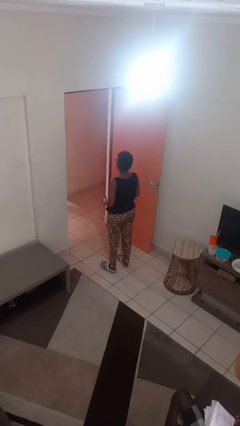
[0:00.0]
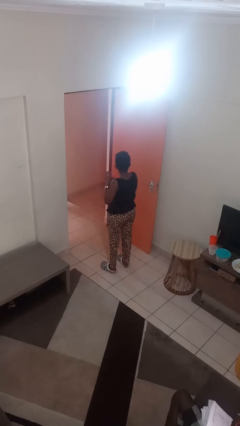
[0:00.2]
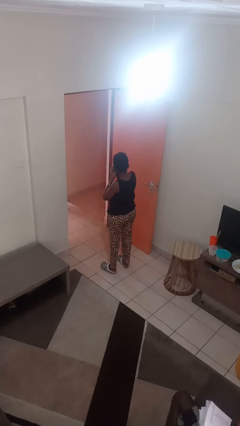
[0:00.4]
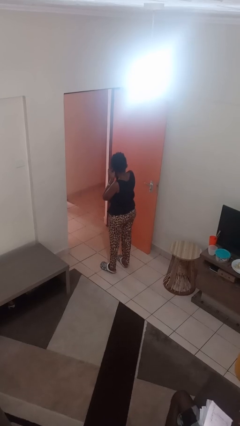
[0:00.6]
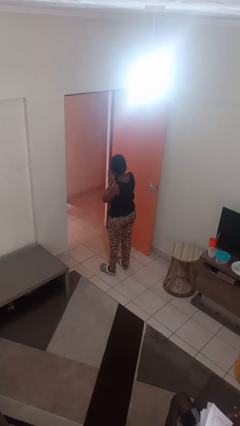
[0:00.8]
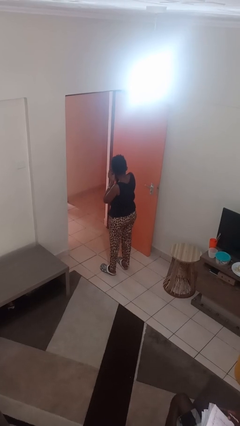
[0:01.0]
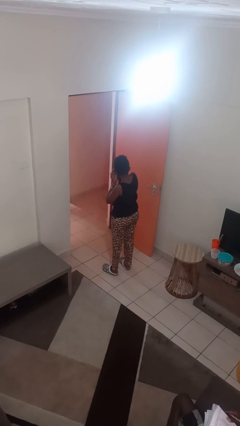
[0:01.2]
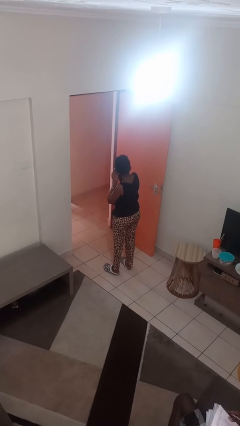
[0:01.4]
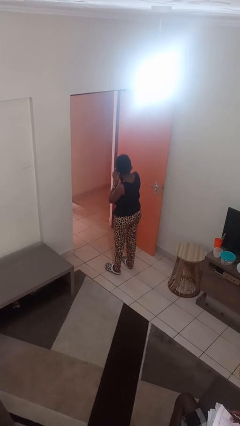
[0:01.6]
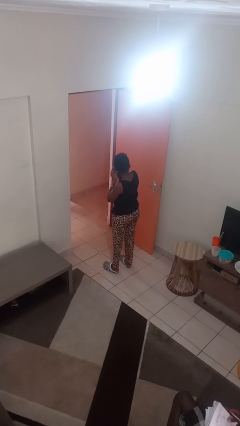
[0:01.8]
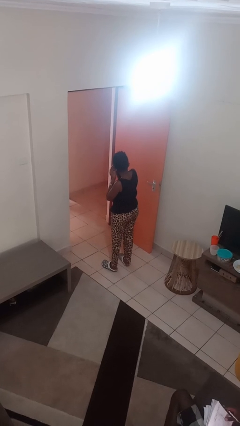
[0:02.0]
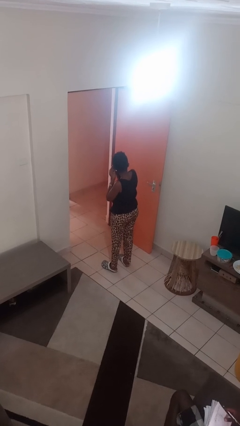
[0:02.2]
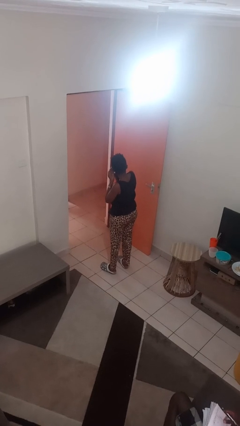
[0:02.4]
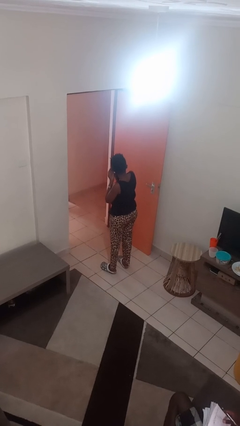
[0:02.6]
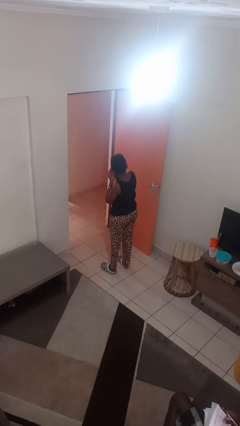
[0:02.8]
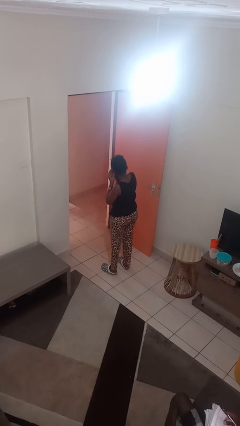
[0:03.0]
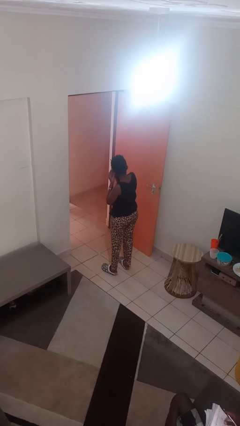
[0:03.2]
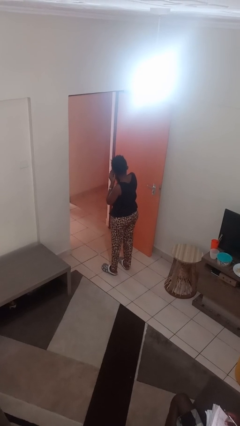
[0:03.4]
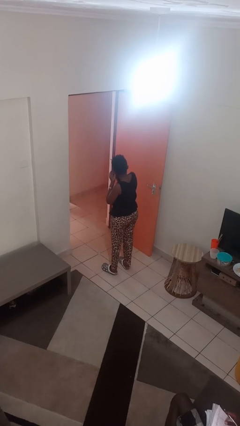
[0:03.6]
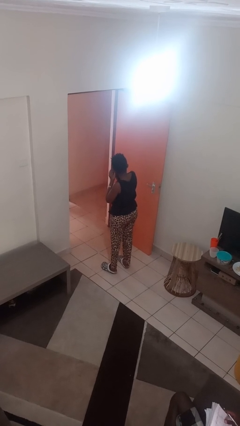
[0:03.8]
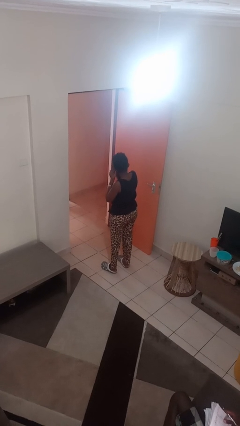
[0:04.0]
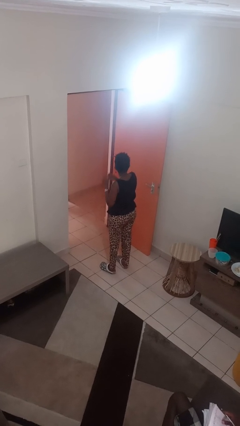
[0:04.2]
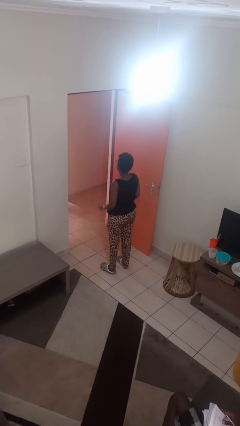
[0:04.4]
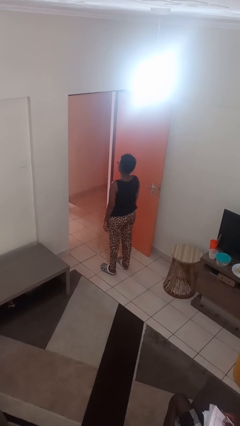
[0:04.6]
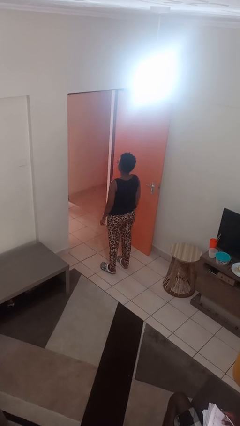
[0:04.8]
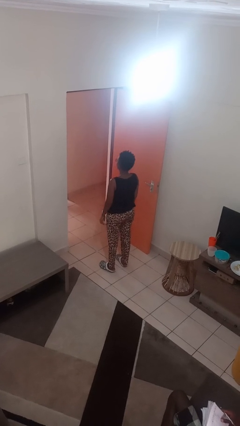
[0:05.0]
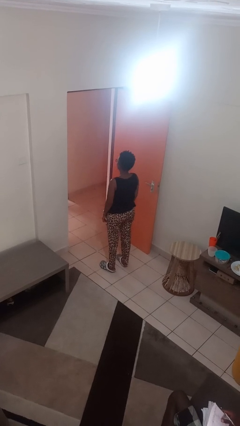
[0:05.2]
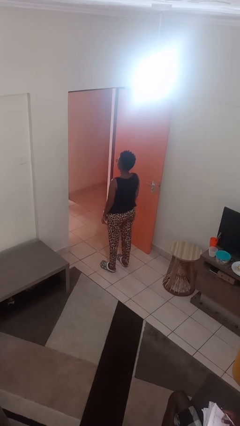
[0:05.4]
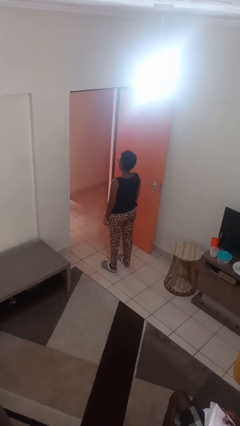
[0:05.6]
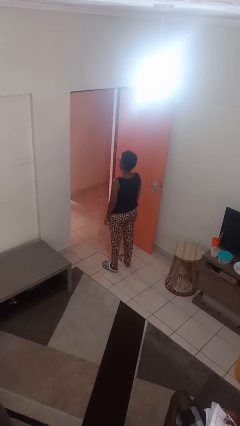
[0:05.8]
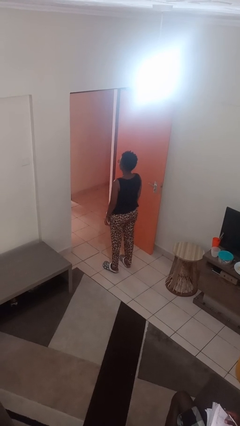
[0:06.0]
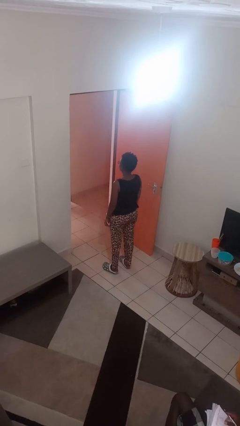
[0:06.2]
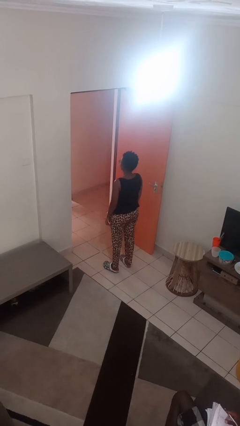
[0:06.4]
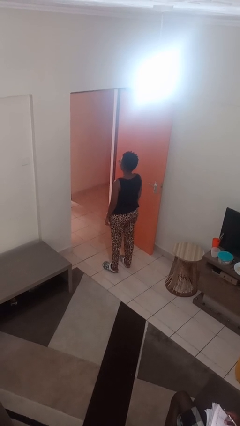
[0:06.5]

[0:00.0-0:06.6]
person puts on earrings

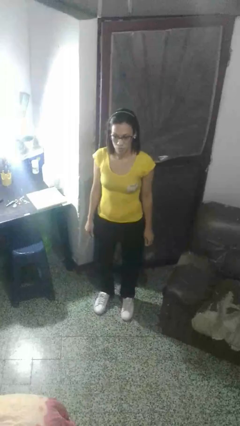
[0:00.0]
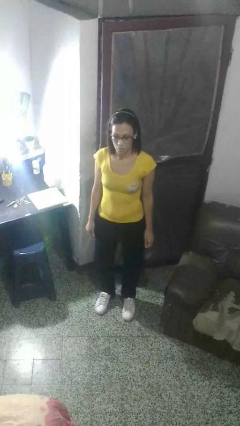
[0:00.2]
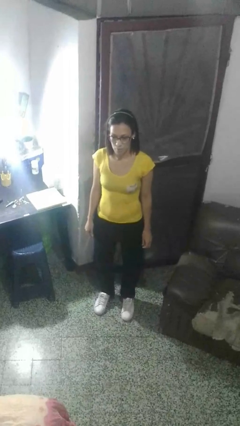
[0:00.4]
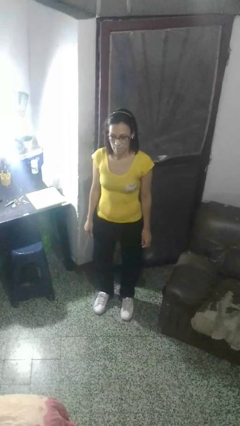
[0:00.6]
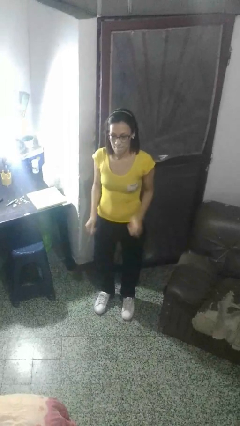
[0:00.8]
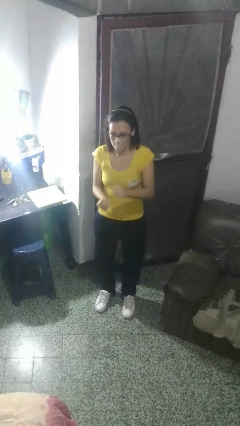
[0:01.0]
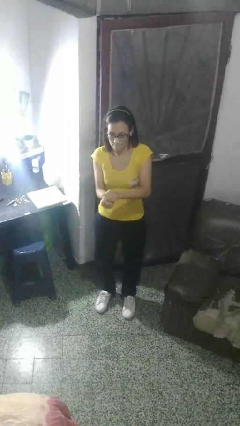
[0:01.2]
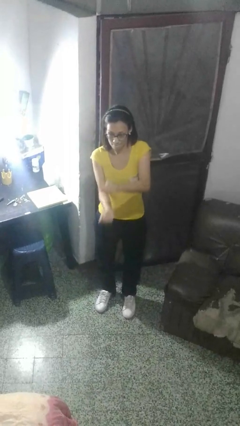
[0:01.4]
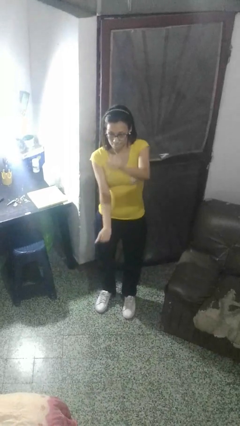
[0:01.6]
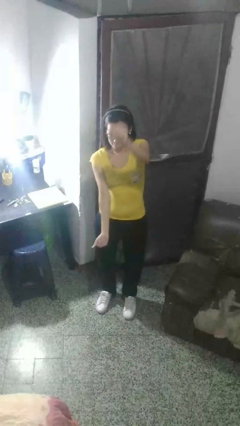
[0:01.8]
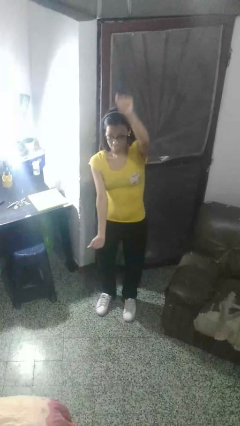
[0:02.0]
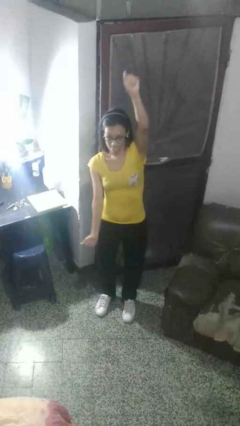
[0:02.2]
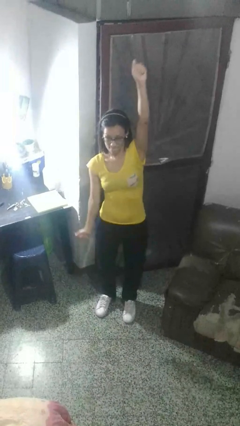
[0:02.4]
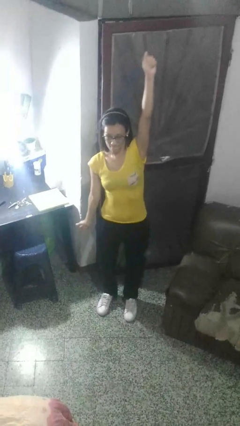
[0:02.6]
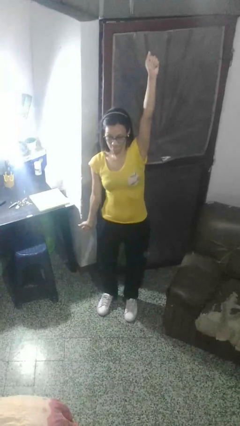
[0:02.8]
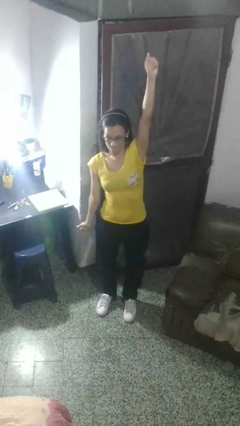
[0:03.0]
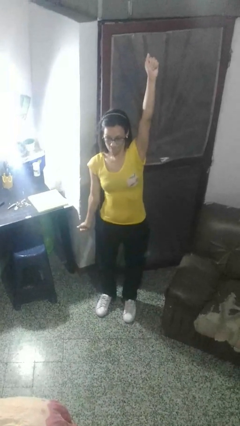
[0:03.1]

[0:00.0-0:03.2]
person gestures zoom in

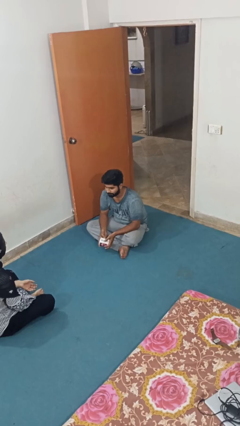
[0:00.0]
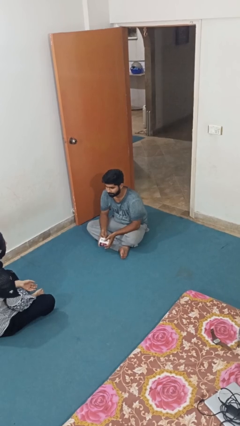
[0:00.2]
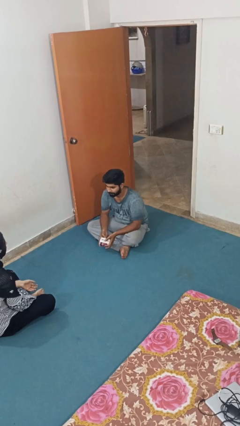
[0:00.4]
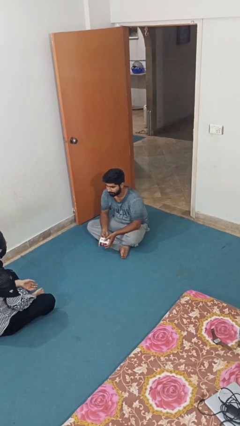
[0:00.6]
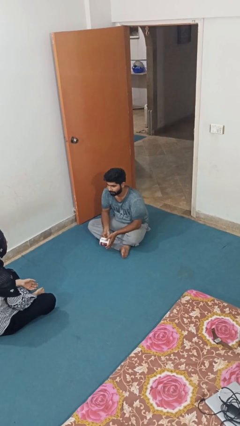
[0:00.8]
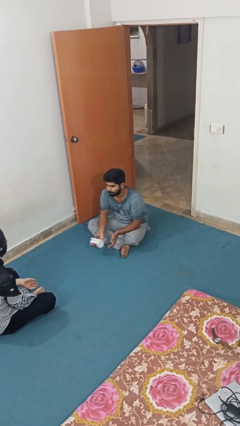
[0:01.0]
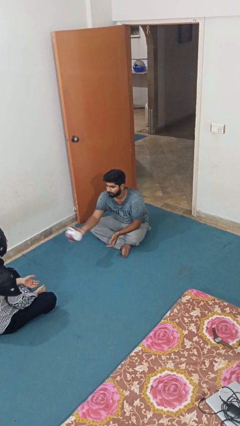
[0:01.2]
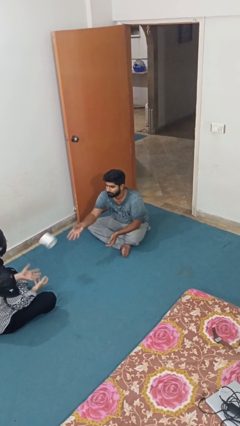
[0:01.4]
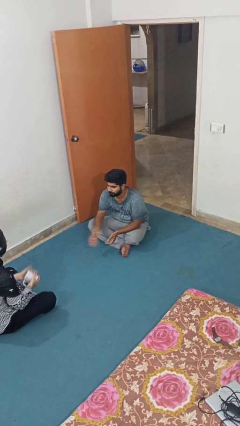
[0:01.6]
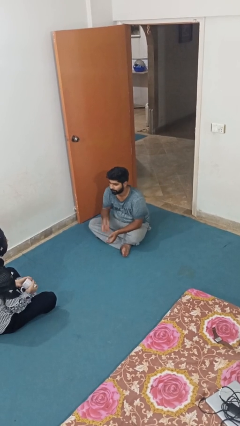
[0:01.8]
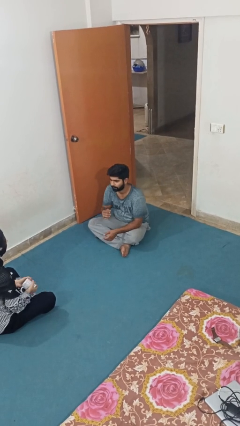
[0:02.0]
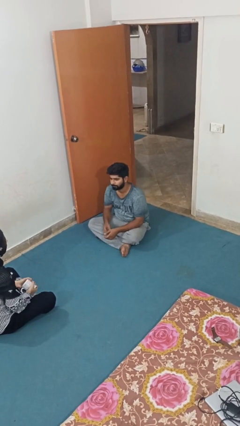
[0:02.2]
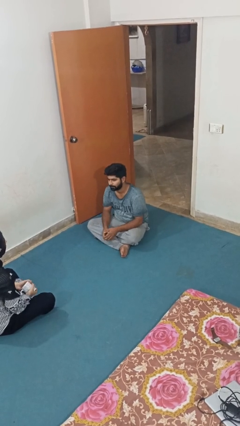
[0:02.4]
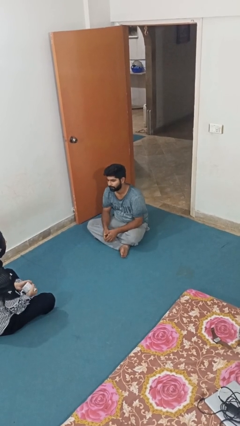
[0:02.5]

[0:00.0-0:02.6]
person throws object to person

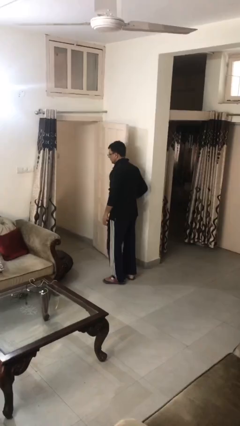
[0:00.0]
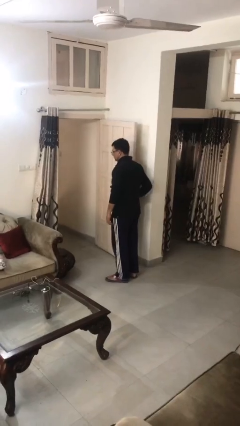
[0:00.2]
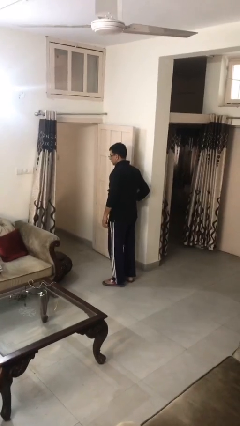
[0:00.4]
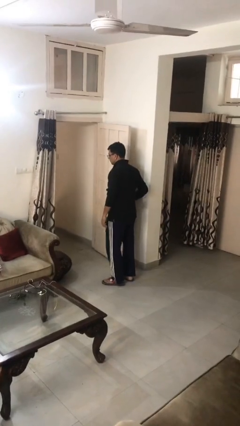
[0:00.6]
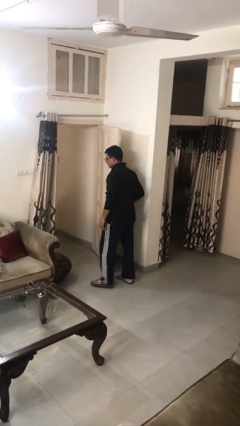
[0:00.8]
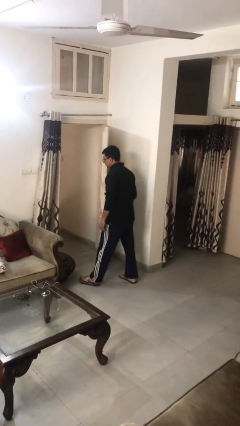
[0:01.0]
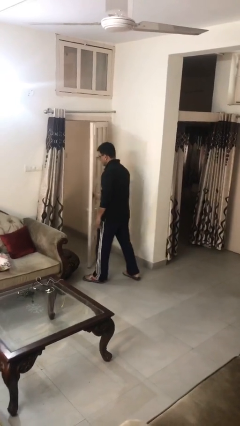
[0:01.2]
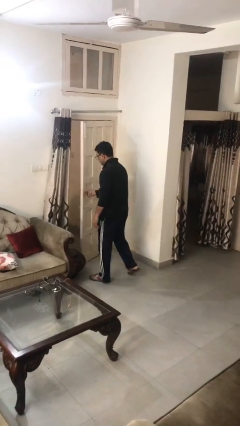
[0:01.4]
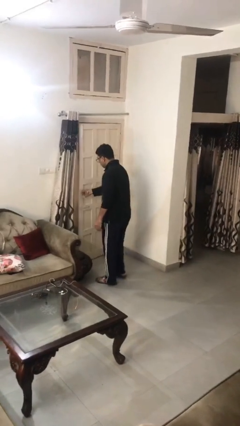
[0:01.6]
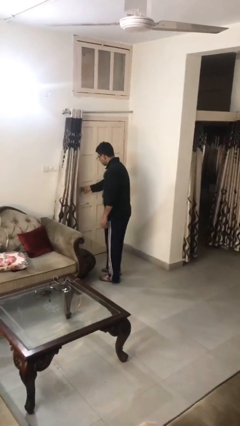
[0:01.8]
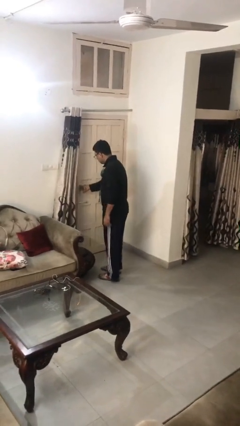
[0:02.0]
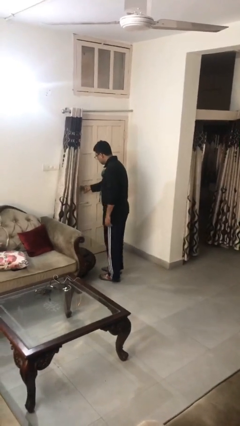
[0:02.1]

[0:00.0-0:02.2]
person closes facility door

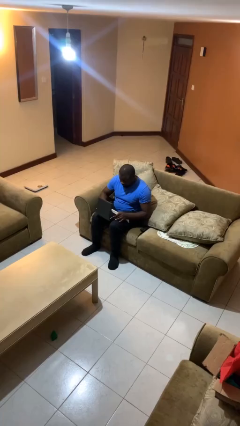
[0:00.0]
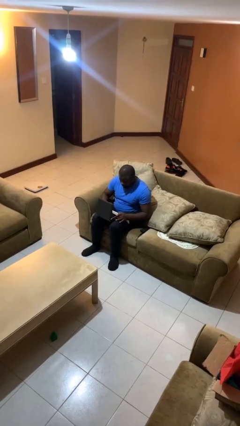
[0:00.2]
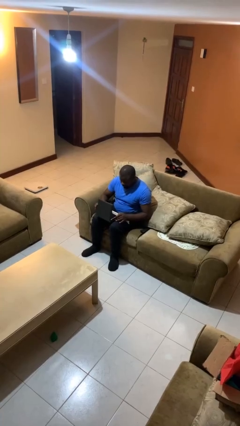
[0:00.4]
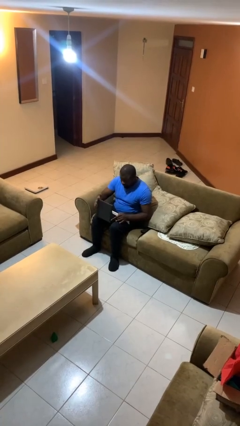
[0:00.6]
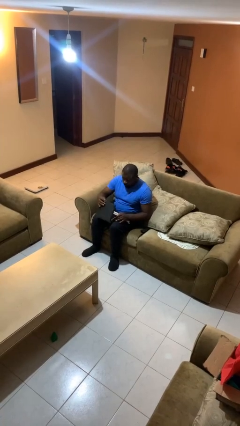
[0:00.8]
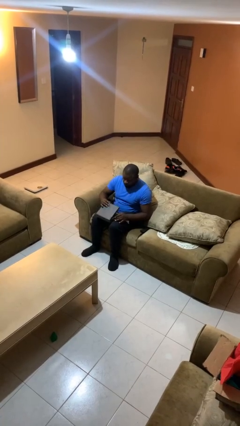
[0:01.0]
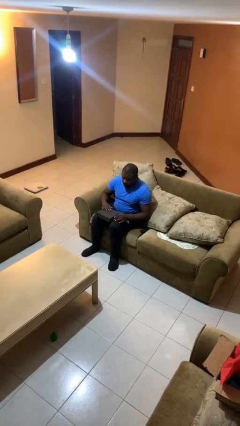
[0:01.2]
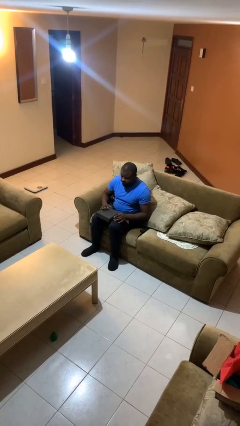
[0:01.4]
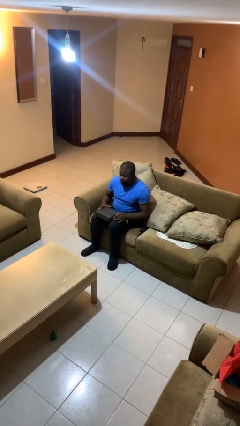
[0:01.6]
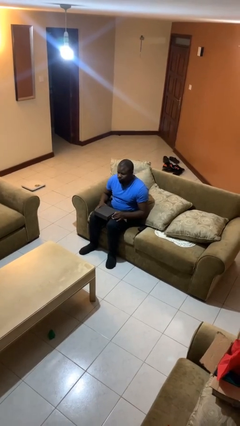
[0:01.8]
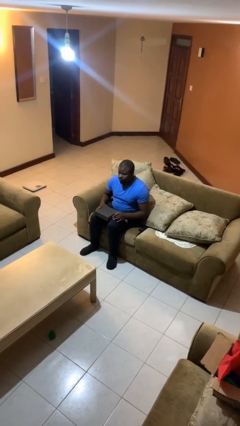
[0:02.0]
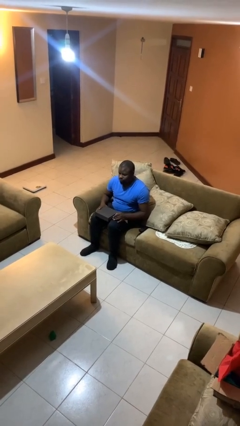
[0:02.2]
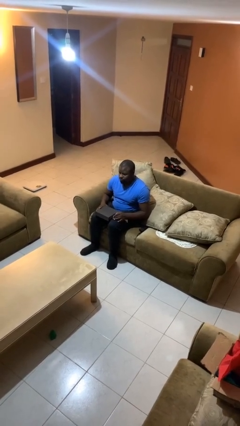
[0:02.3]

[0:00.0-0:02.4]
person closes jewelry box

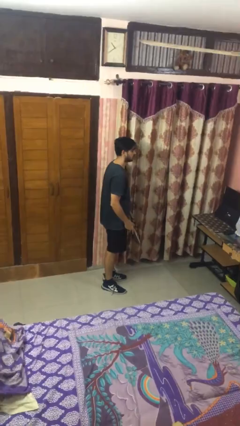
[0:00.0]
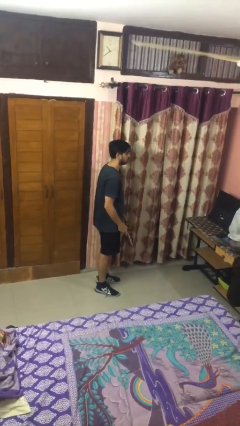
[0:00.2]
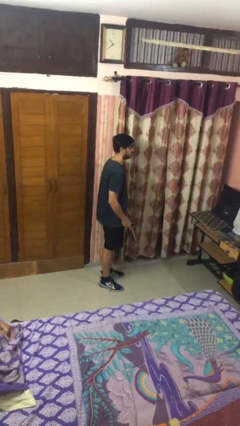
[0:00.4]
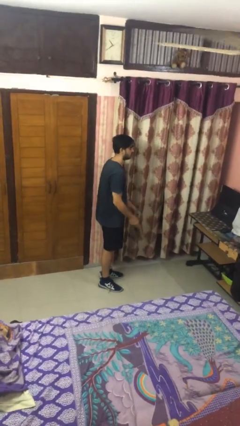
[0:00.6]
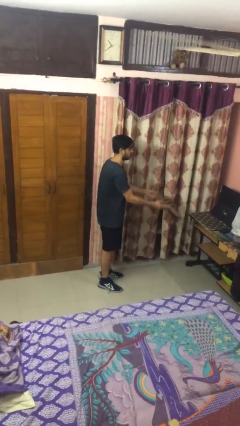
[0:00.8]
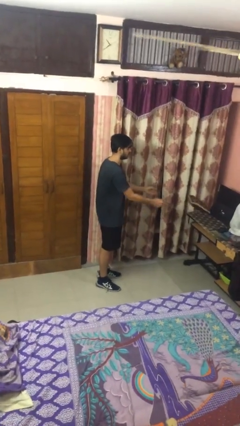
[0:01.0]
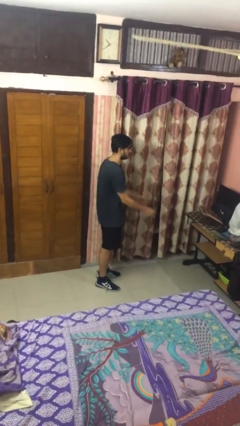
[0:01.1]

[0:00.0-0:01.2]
person throws object on table
